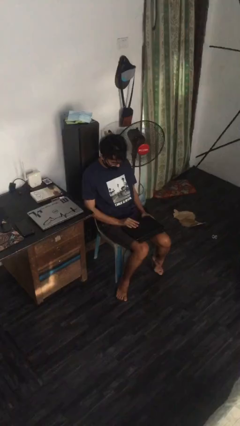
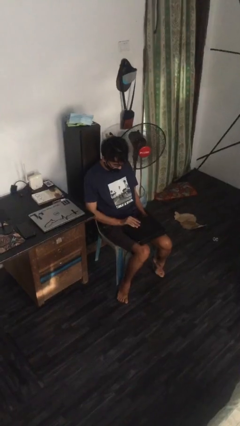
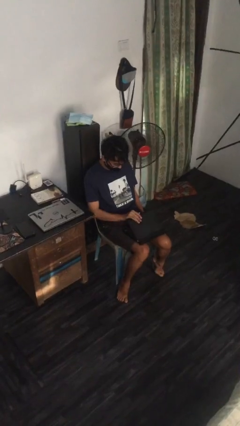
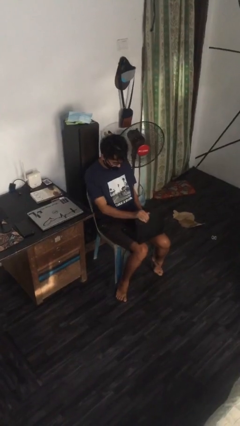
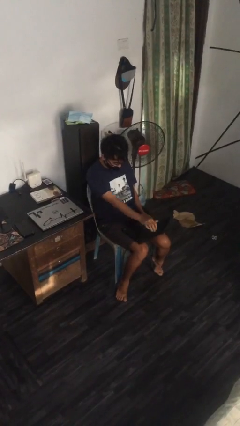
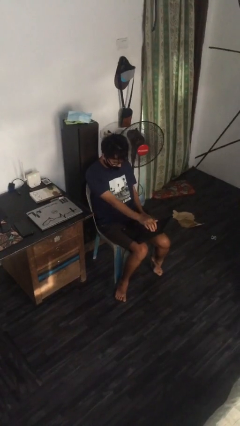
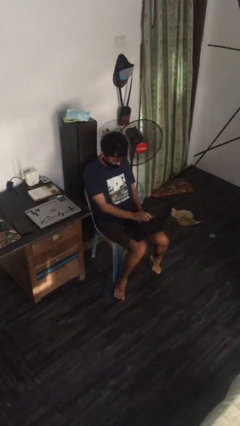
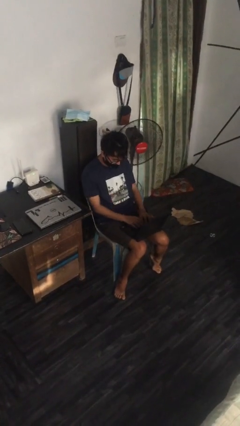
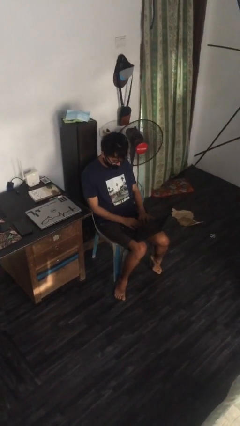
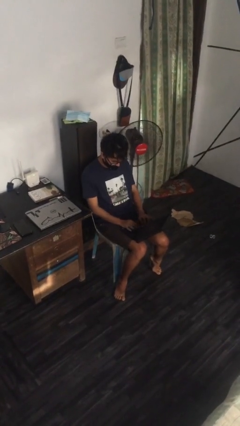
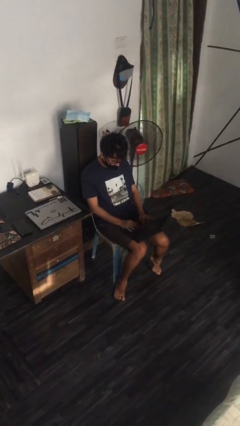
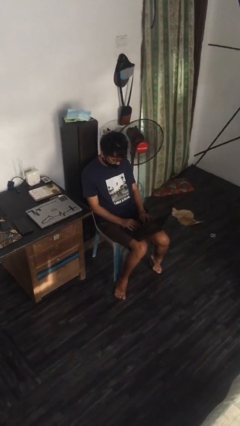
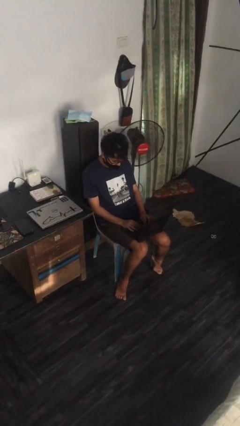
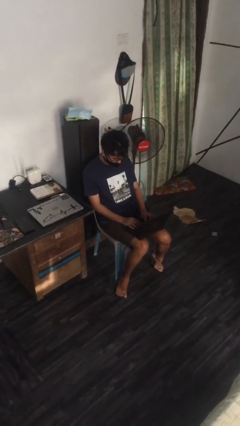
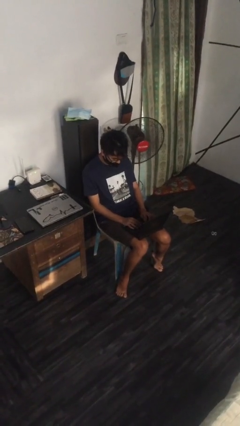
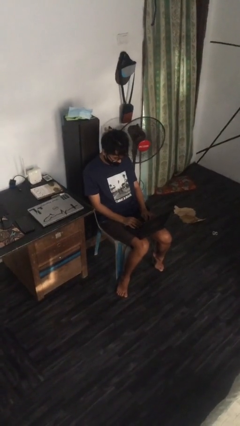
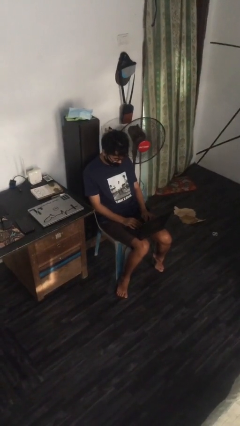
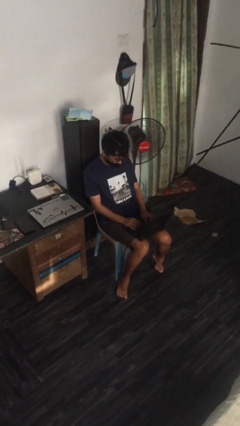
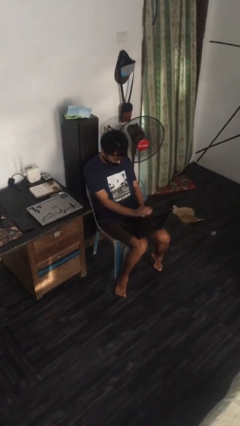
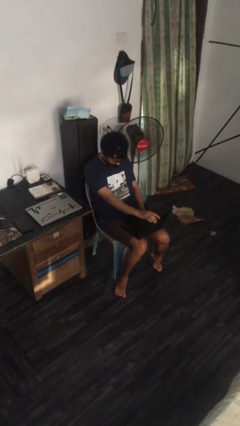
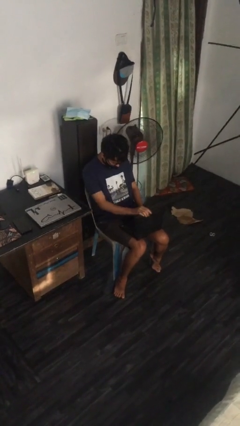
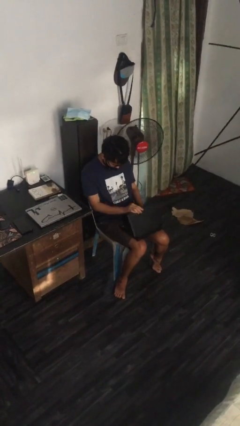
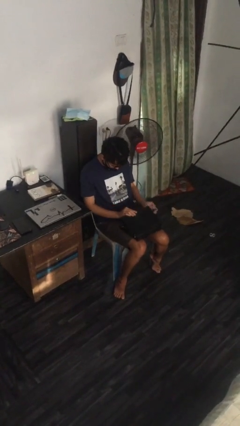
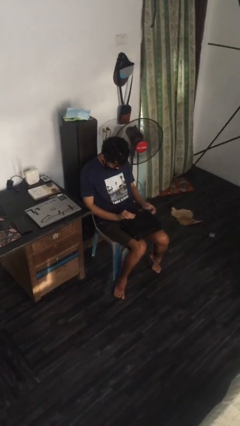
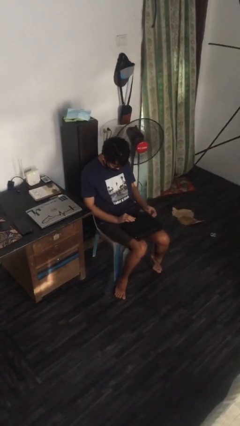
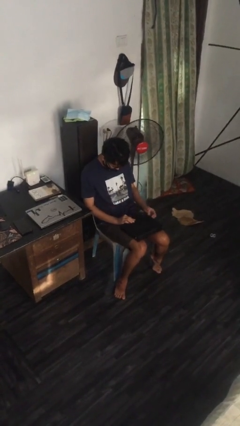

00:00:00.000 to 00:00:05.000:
person interacts with laptop

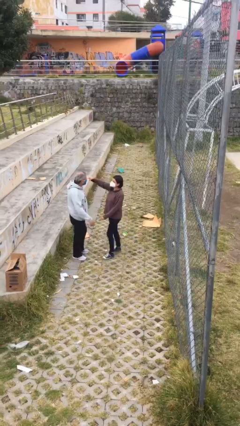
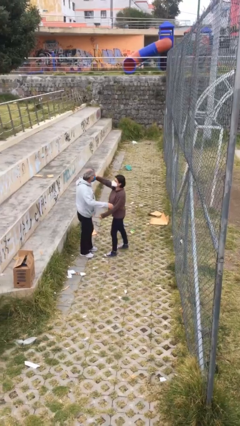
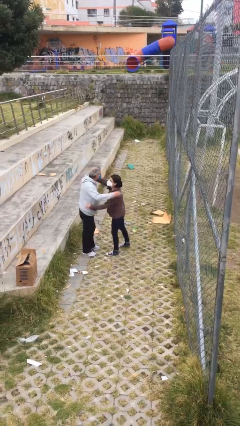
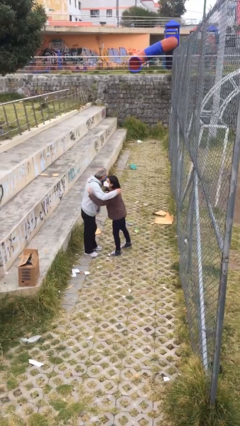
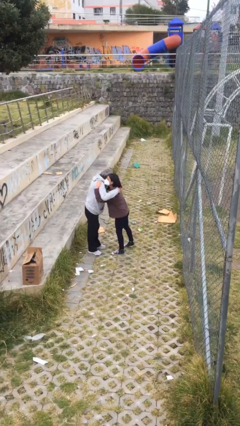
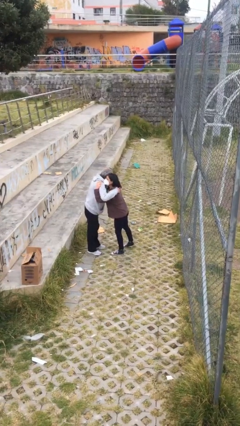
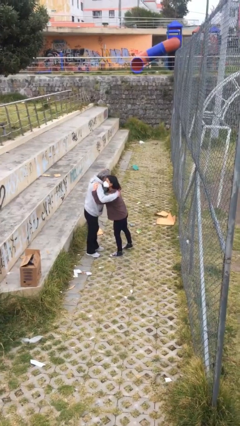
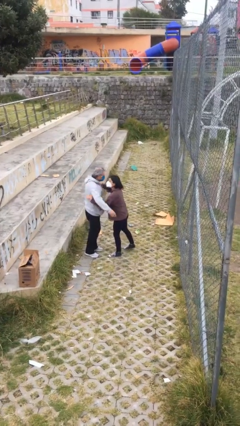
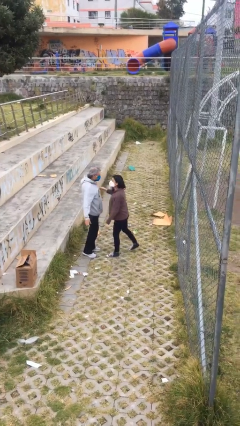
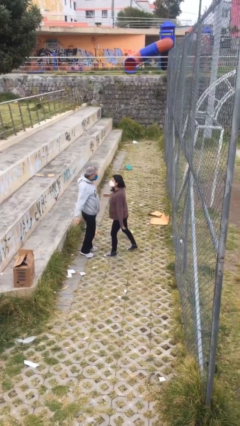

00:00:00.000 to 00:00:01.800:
person embraces person

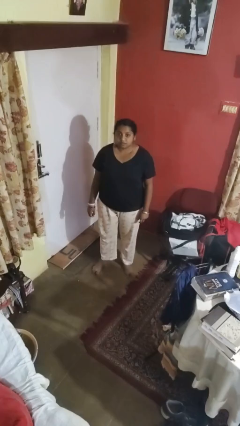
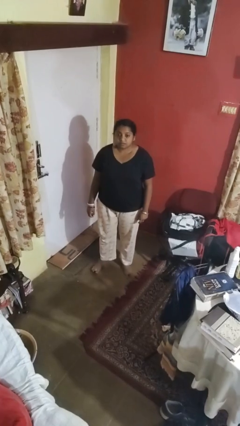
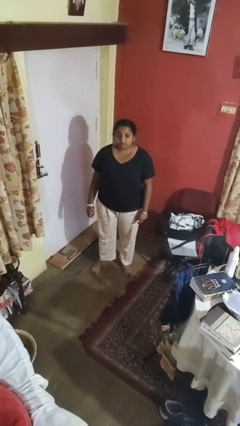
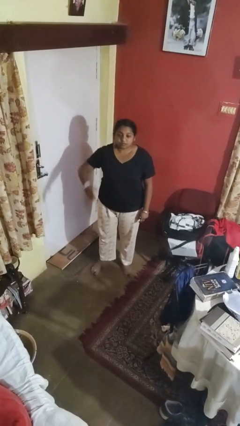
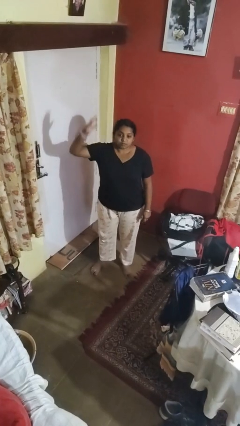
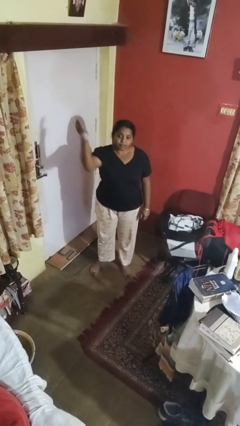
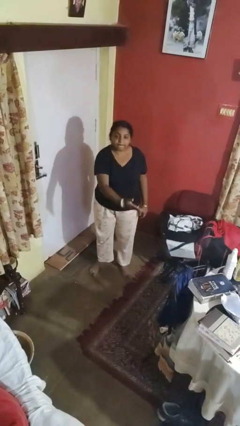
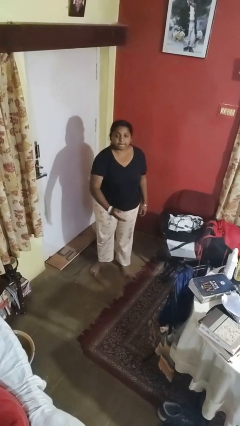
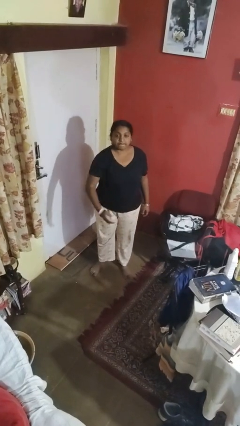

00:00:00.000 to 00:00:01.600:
person karate chop

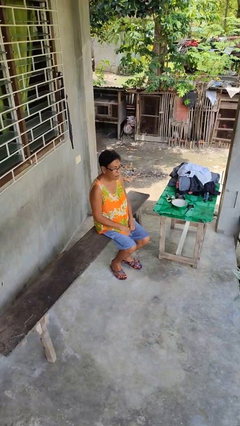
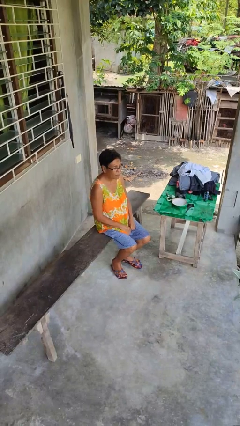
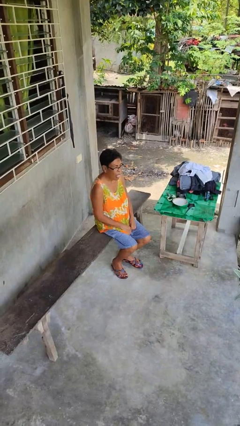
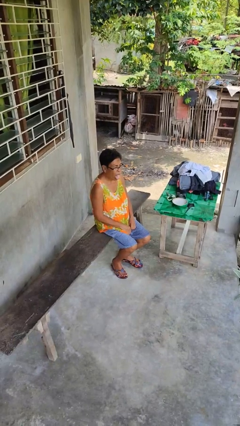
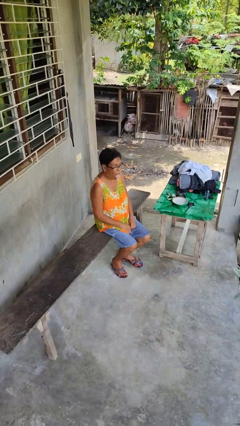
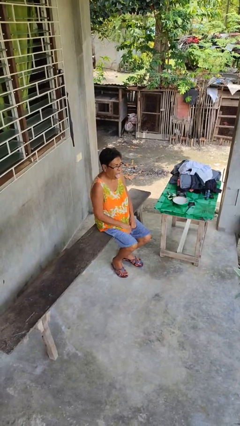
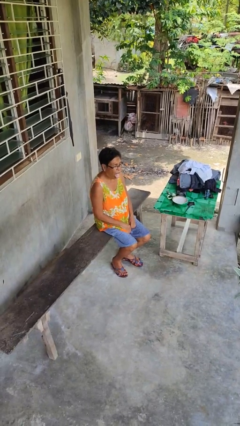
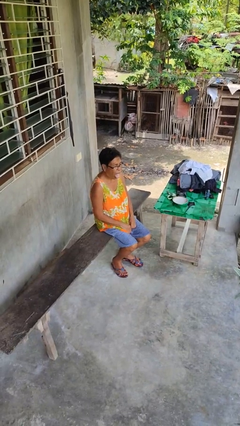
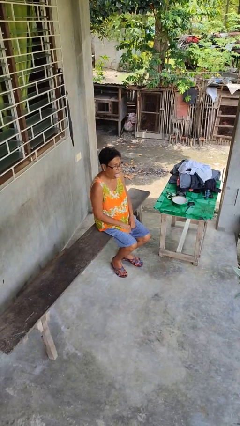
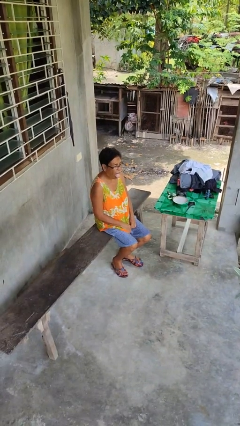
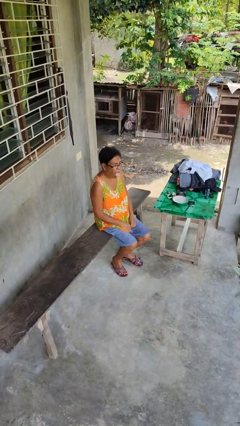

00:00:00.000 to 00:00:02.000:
person sticks out tongue

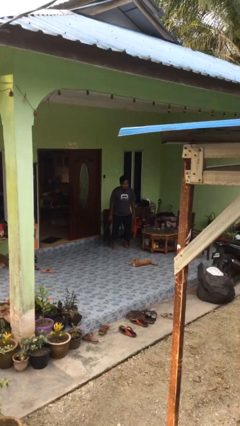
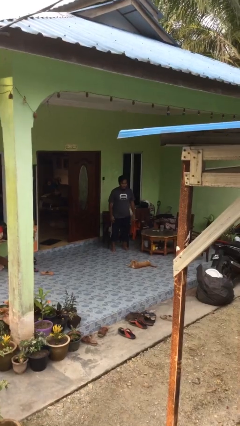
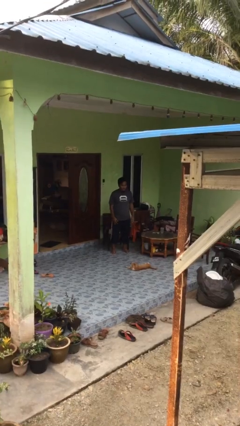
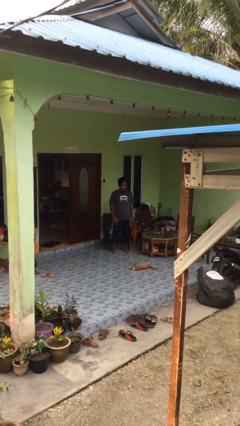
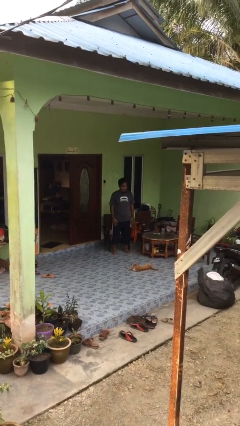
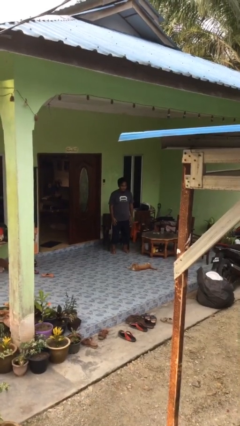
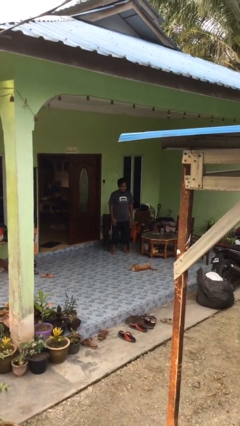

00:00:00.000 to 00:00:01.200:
person stands up

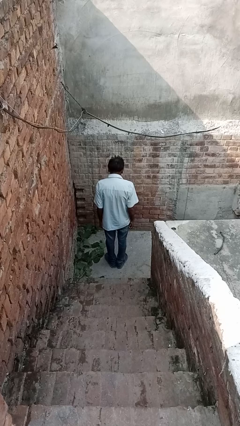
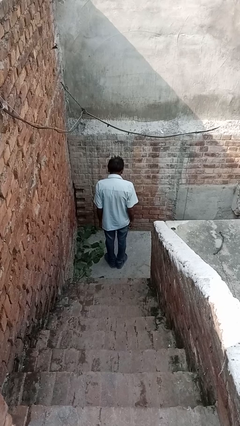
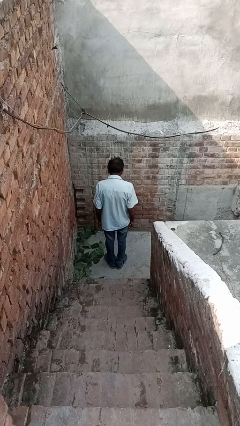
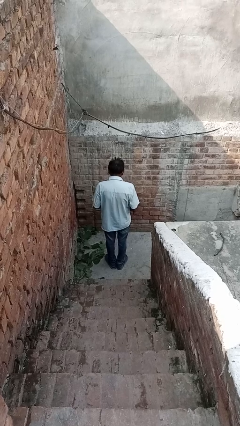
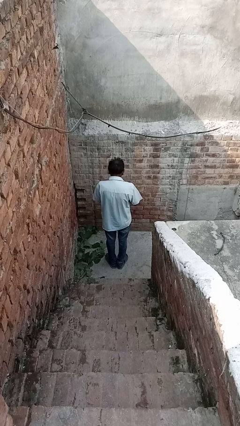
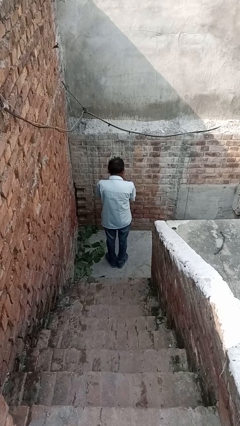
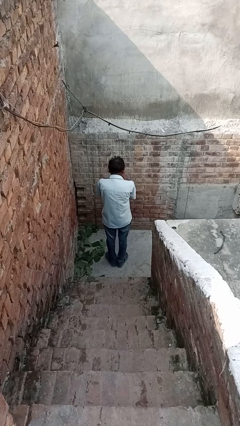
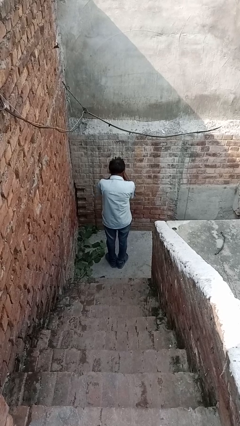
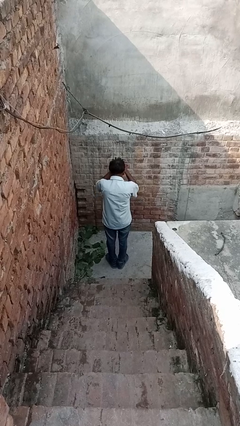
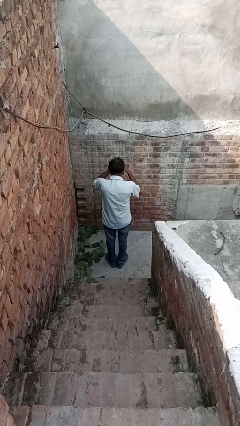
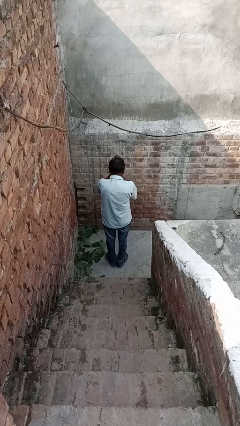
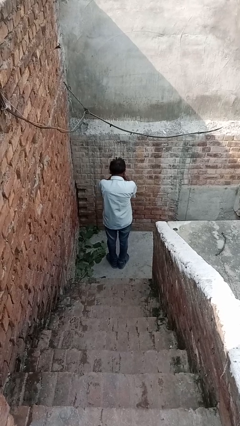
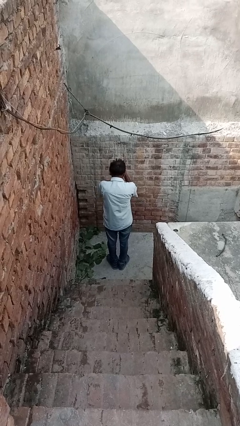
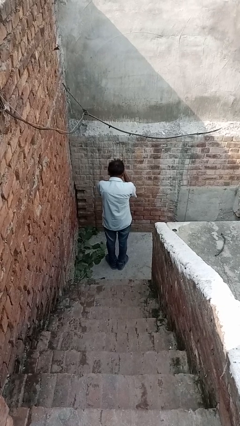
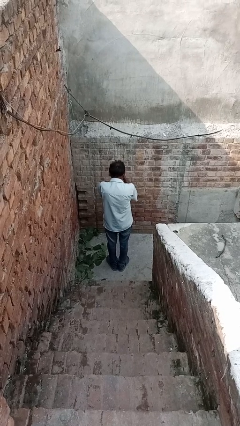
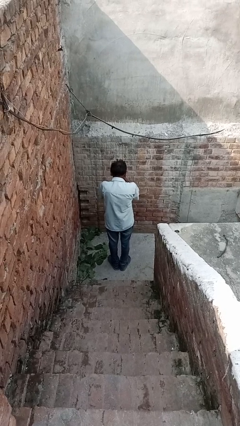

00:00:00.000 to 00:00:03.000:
person blows into hands

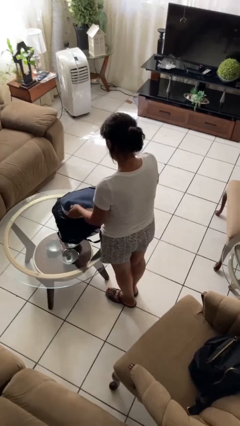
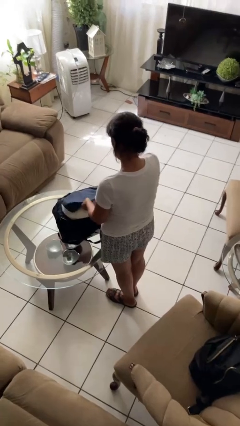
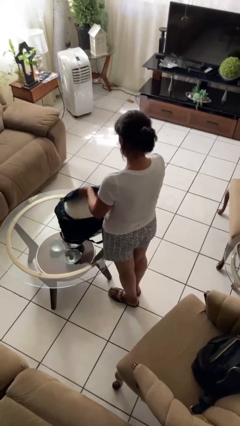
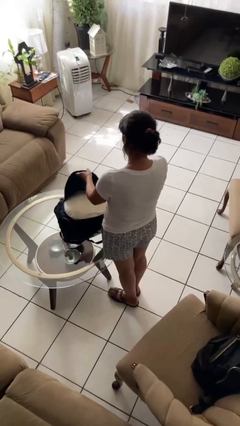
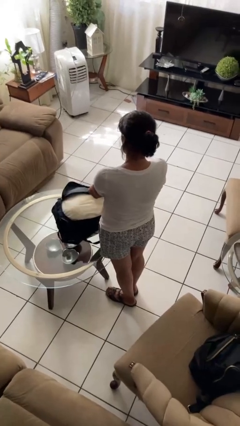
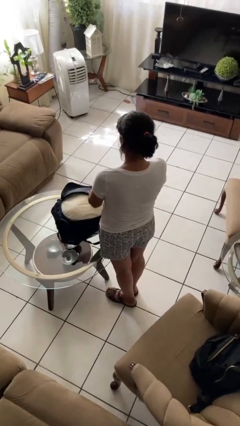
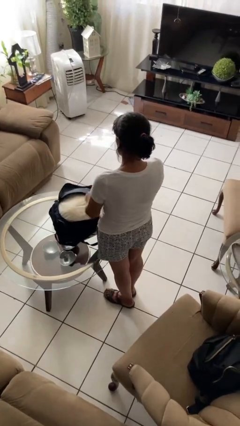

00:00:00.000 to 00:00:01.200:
person opens suitcase

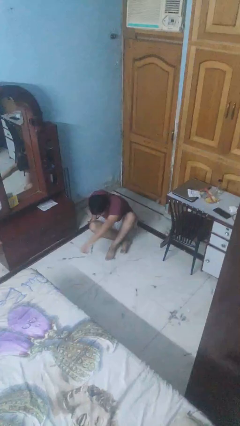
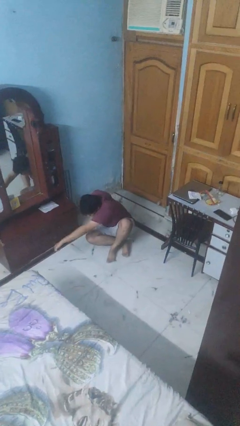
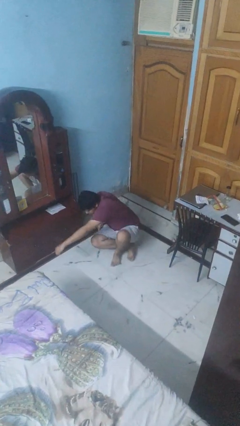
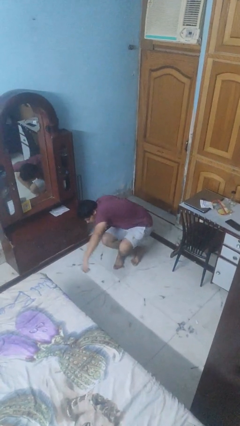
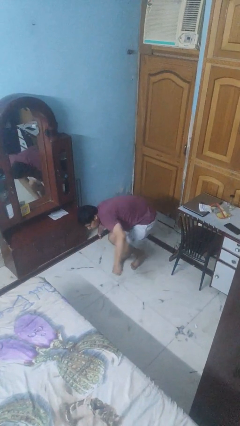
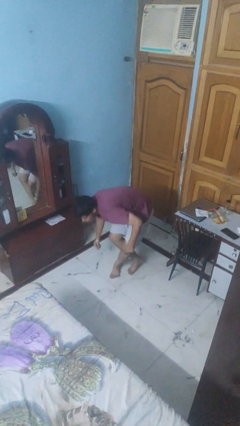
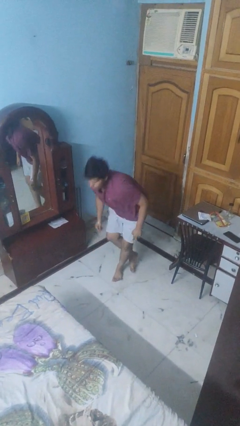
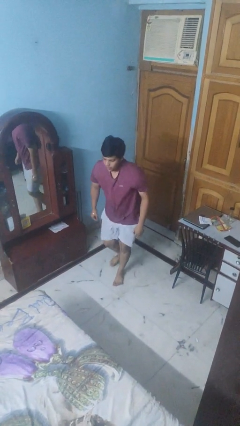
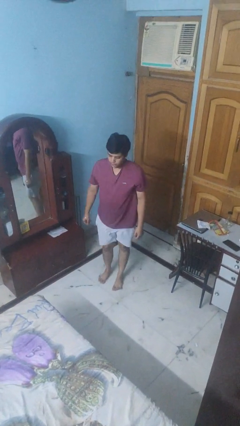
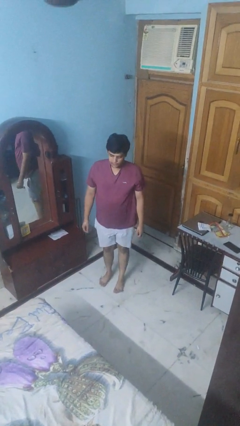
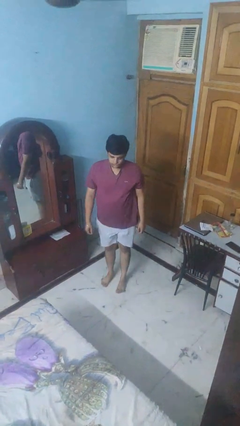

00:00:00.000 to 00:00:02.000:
person stands up from floor
